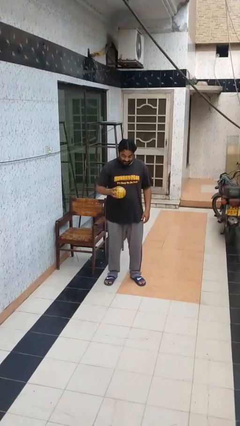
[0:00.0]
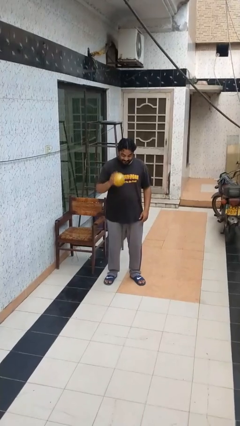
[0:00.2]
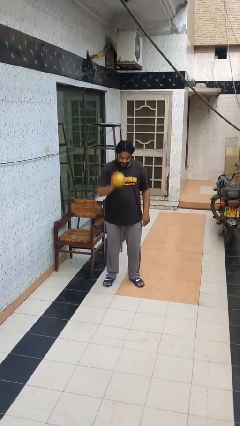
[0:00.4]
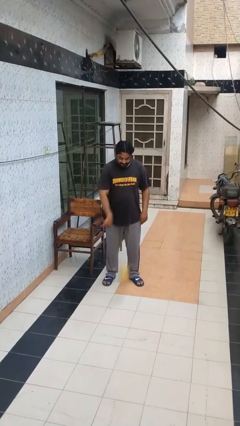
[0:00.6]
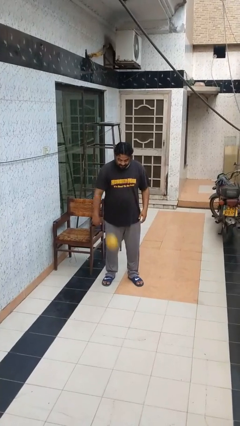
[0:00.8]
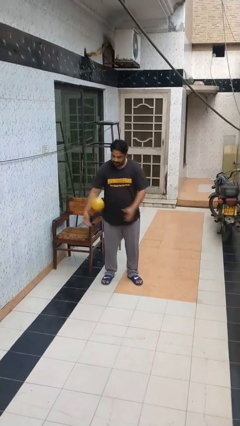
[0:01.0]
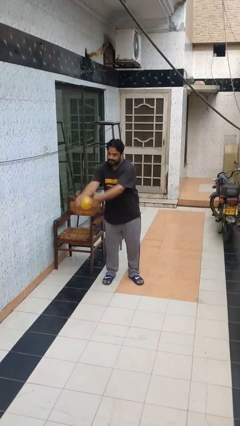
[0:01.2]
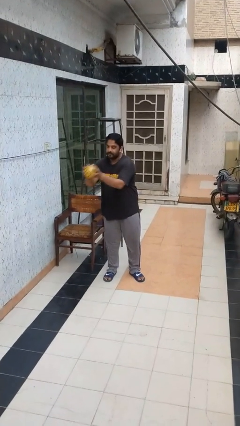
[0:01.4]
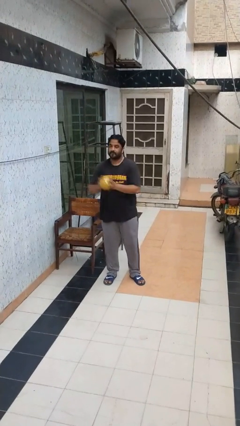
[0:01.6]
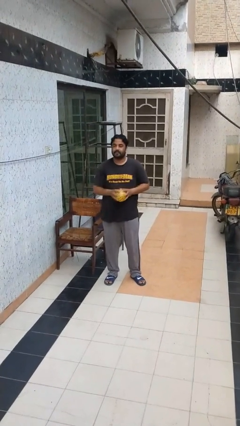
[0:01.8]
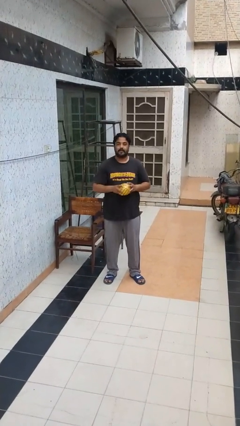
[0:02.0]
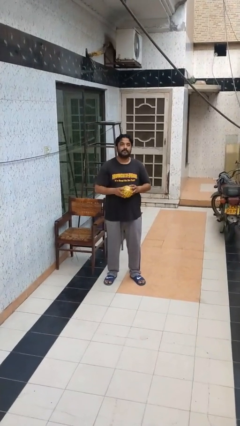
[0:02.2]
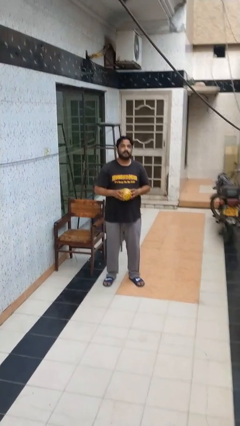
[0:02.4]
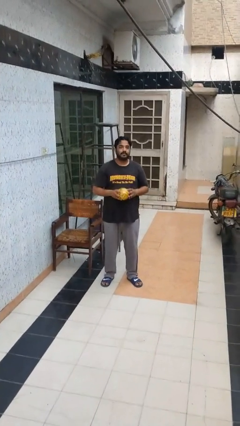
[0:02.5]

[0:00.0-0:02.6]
person bounces ball on floor

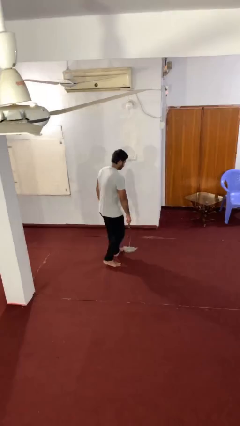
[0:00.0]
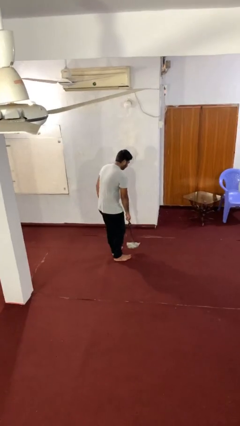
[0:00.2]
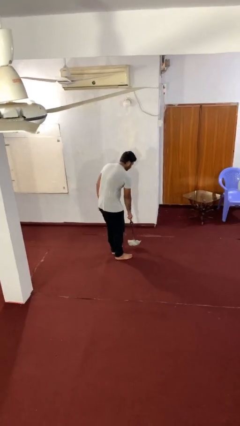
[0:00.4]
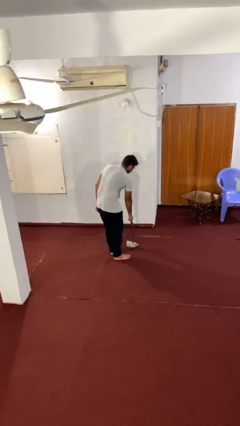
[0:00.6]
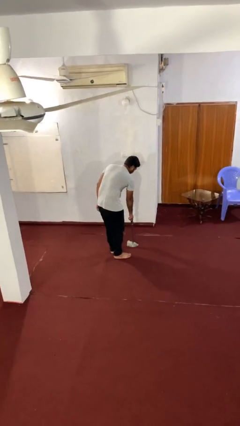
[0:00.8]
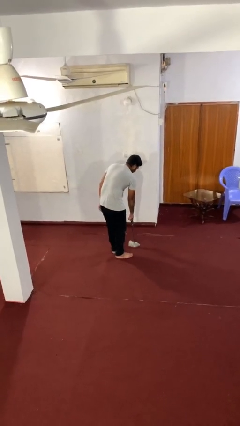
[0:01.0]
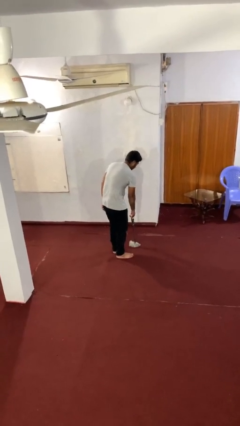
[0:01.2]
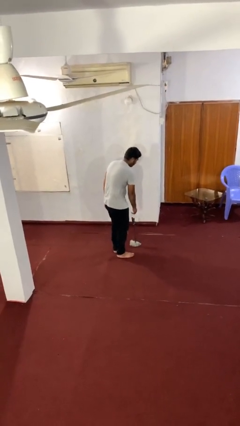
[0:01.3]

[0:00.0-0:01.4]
person puts down object on floor

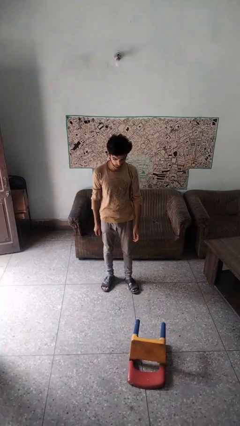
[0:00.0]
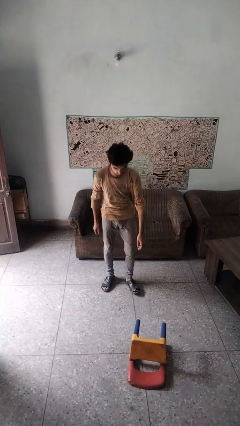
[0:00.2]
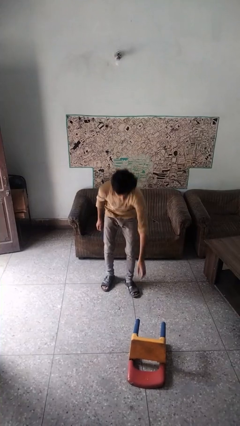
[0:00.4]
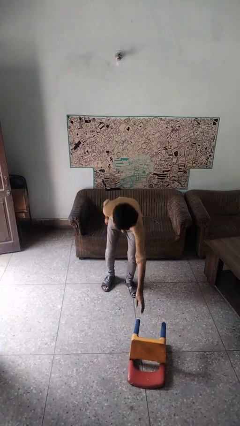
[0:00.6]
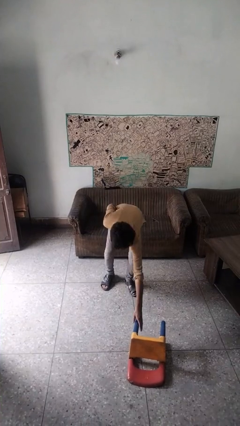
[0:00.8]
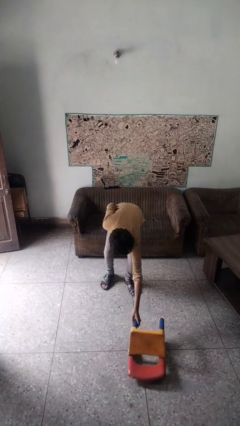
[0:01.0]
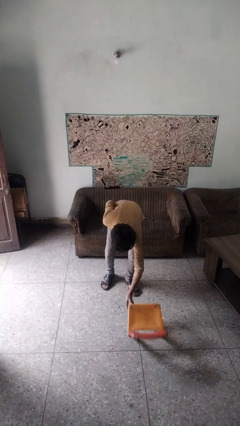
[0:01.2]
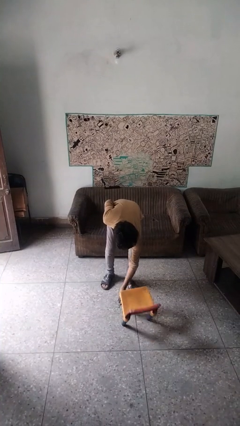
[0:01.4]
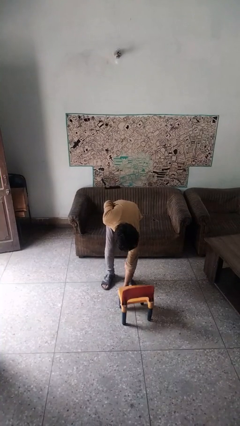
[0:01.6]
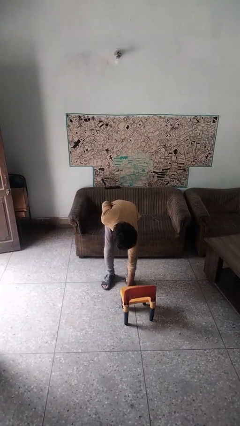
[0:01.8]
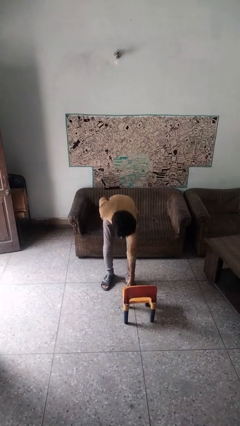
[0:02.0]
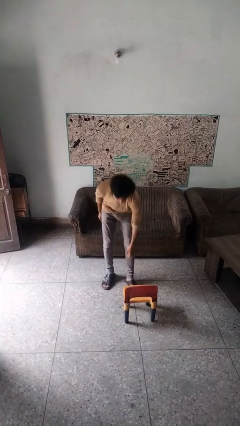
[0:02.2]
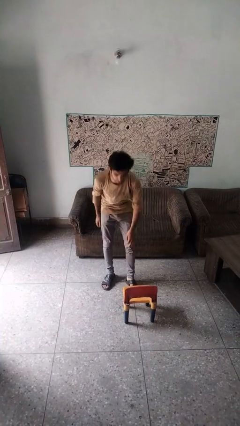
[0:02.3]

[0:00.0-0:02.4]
person sets upright furniture

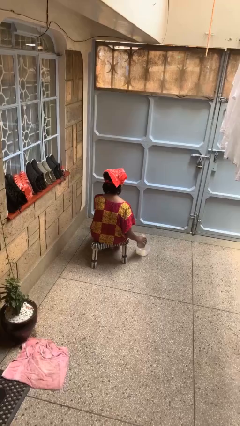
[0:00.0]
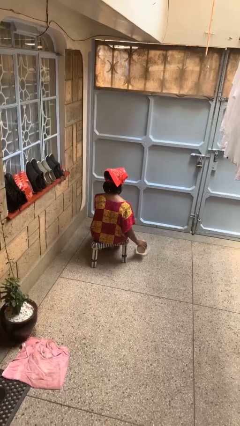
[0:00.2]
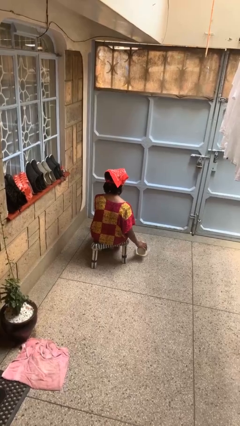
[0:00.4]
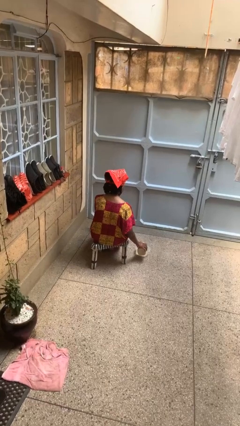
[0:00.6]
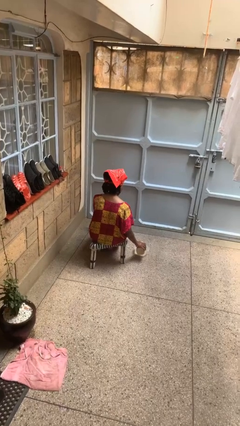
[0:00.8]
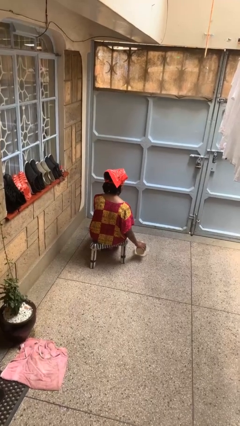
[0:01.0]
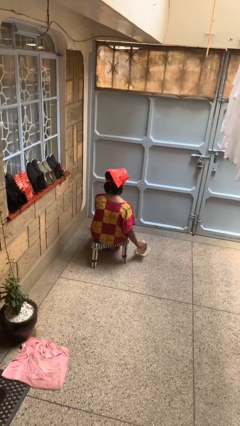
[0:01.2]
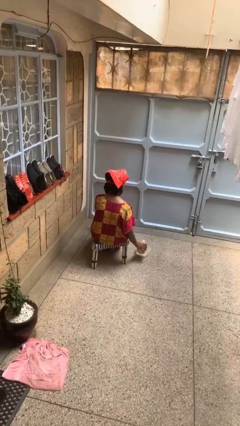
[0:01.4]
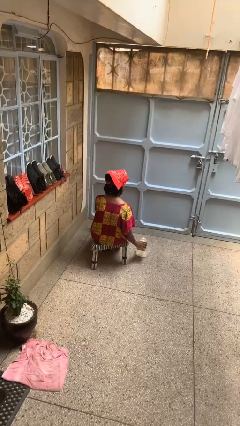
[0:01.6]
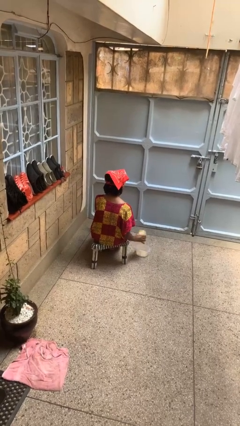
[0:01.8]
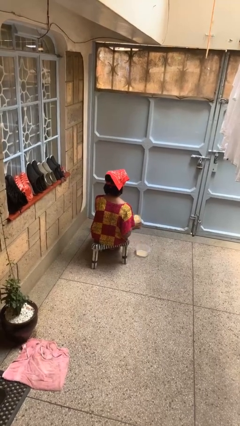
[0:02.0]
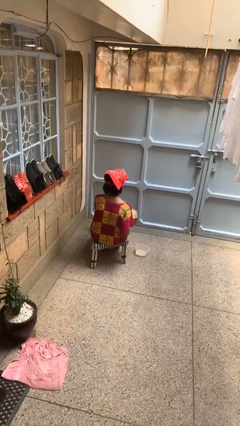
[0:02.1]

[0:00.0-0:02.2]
person pours into bowl

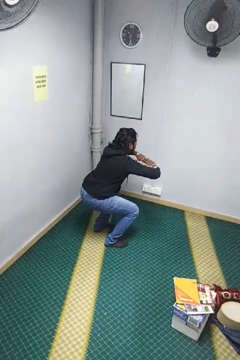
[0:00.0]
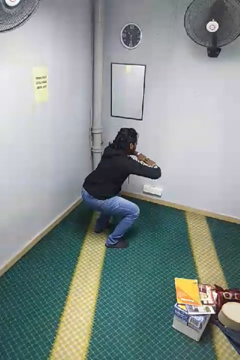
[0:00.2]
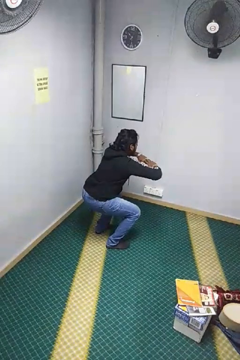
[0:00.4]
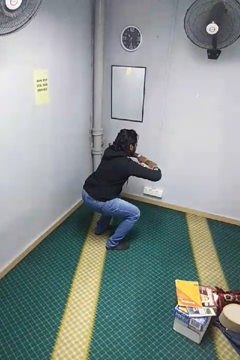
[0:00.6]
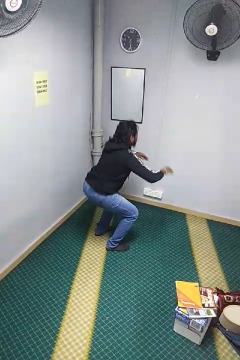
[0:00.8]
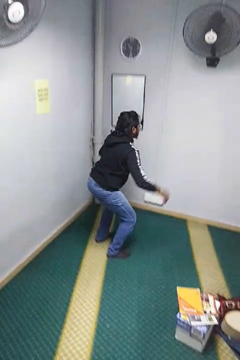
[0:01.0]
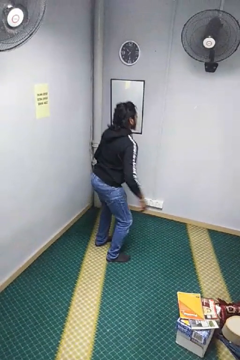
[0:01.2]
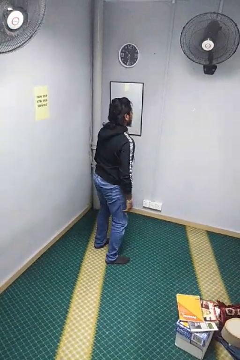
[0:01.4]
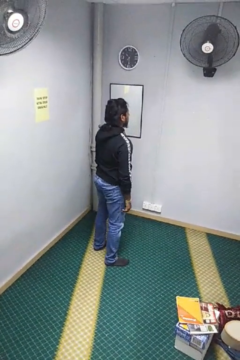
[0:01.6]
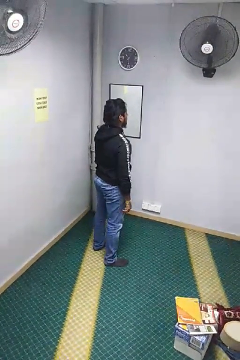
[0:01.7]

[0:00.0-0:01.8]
person stands up

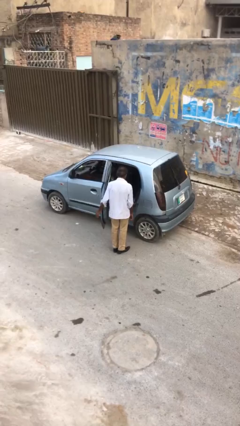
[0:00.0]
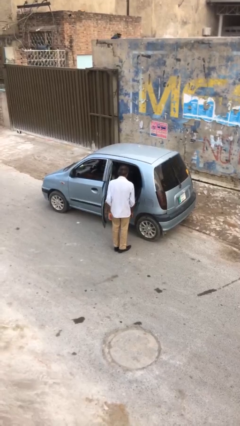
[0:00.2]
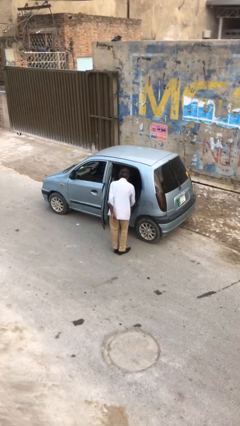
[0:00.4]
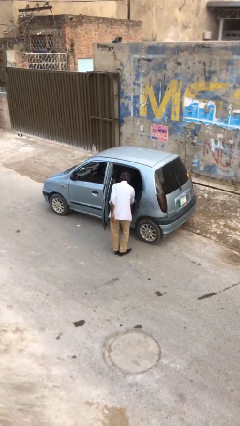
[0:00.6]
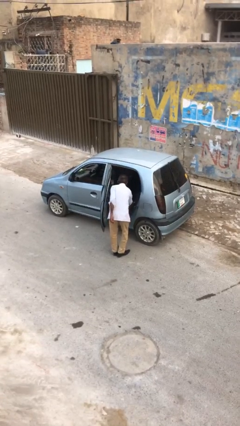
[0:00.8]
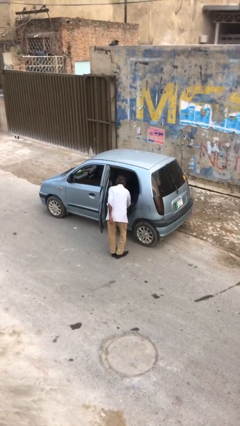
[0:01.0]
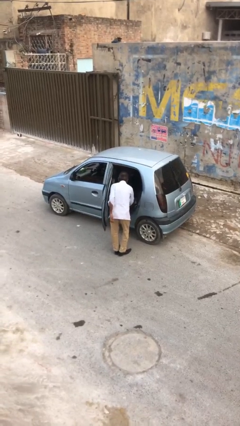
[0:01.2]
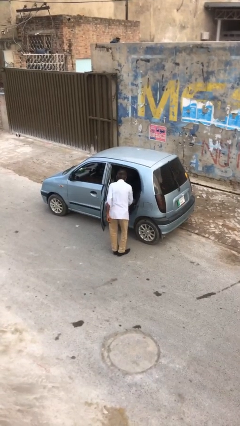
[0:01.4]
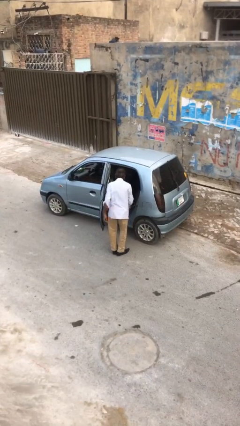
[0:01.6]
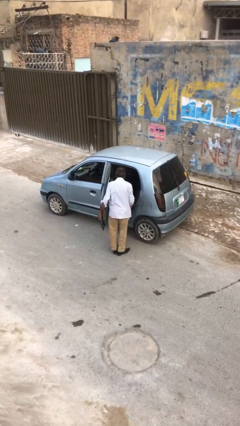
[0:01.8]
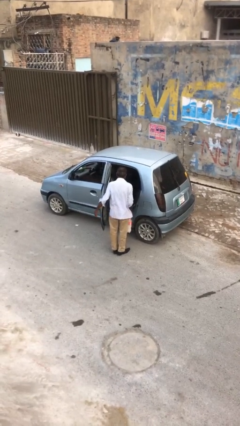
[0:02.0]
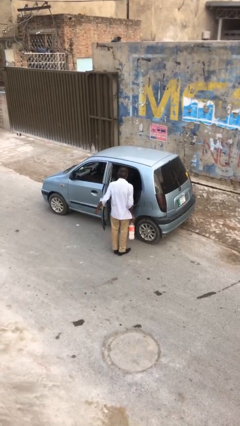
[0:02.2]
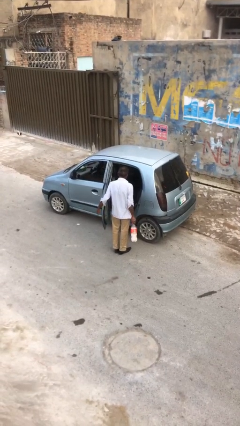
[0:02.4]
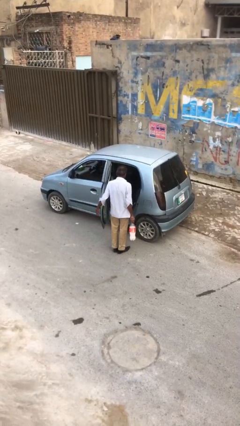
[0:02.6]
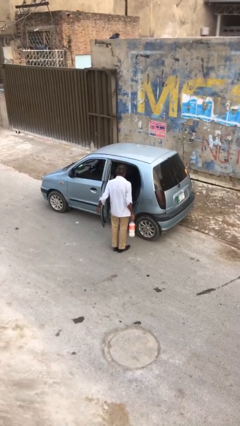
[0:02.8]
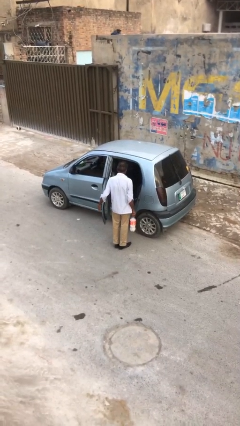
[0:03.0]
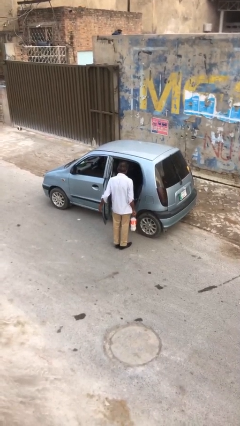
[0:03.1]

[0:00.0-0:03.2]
person unloads car

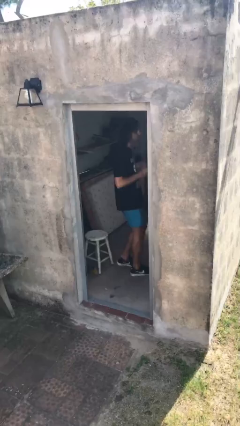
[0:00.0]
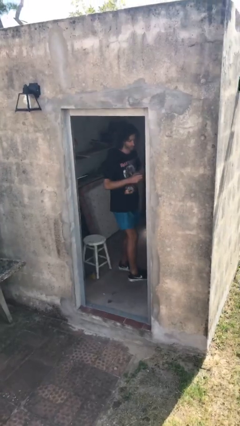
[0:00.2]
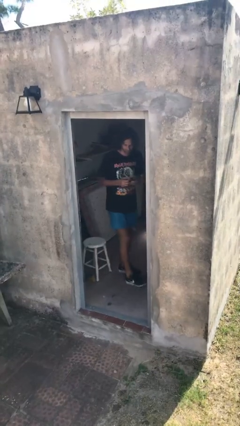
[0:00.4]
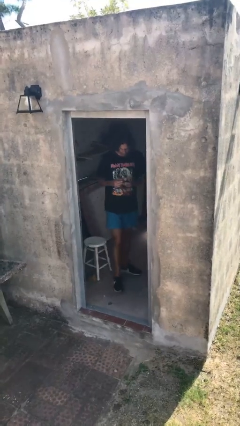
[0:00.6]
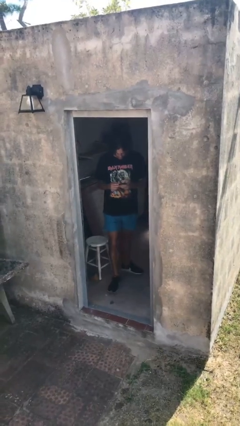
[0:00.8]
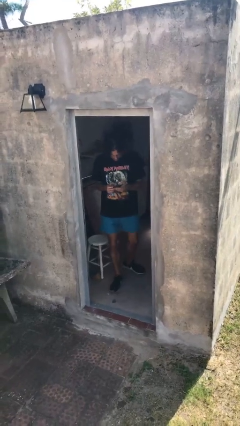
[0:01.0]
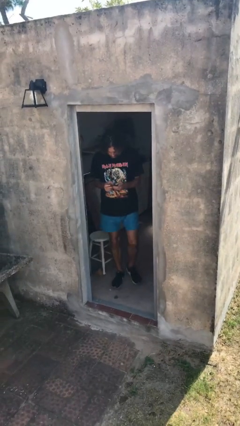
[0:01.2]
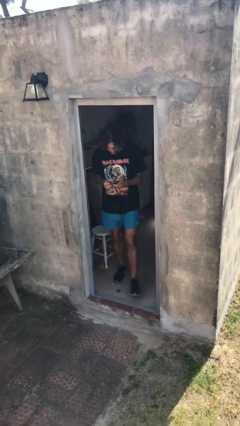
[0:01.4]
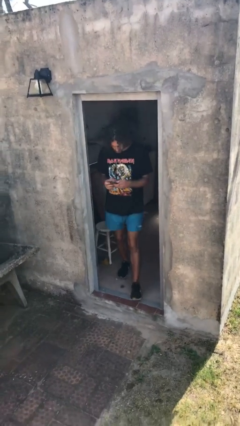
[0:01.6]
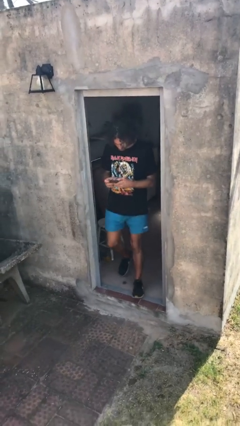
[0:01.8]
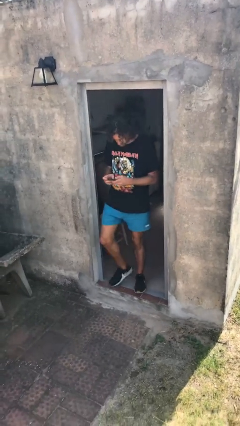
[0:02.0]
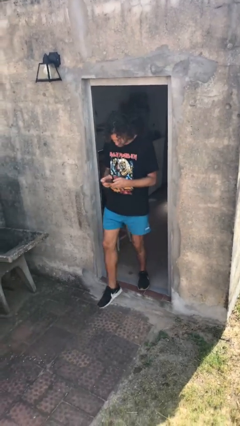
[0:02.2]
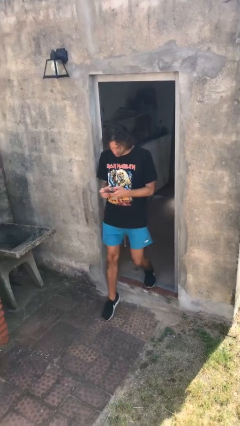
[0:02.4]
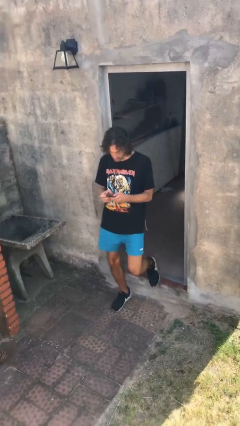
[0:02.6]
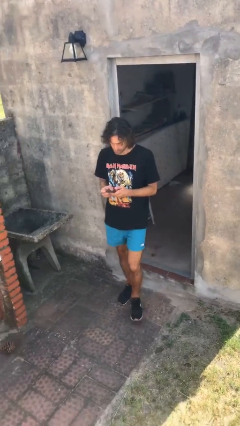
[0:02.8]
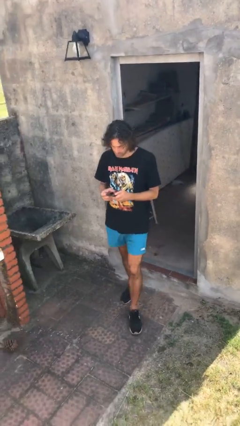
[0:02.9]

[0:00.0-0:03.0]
person enters scene through structure

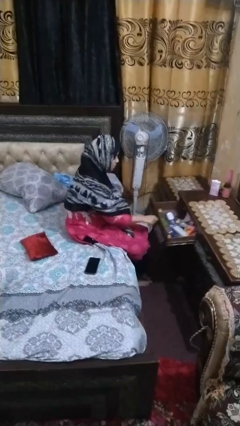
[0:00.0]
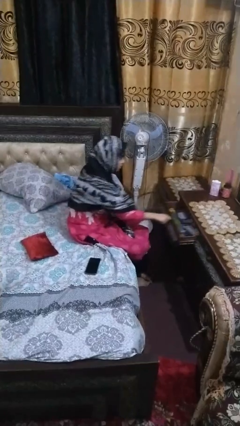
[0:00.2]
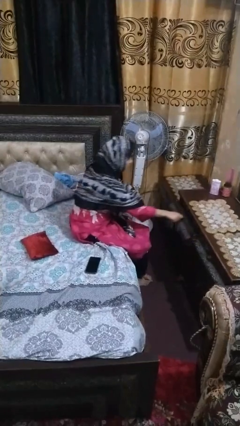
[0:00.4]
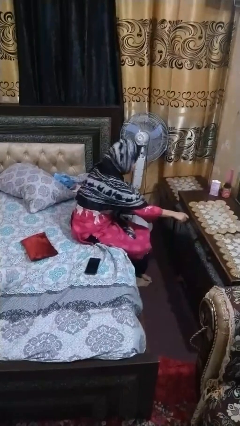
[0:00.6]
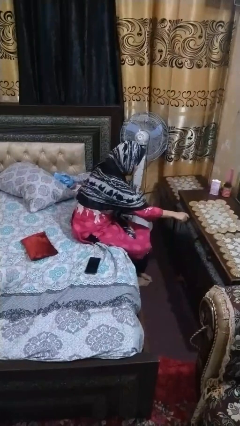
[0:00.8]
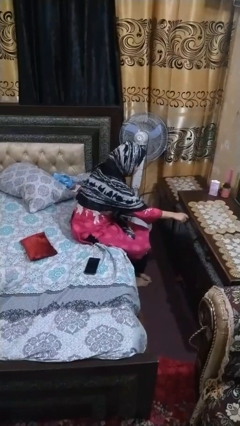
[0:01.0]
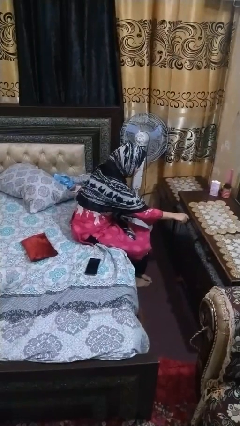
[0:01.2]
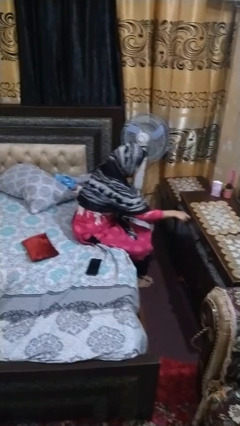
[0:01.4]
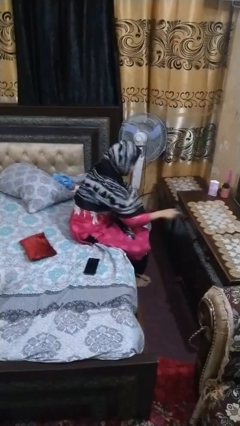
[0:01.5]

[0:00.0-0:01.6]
person closes dresser drawer
